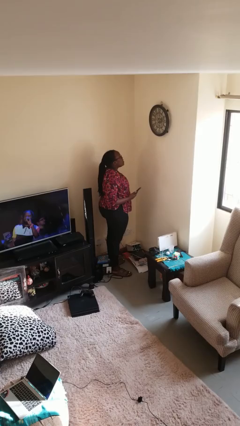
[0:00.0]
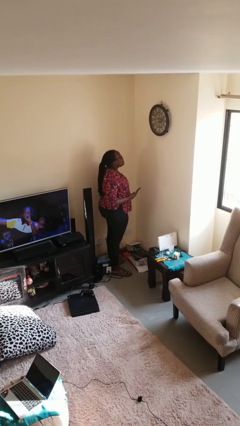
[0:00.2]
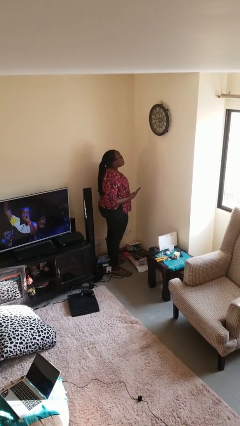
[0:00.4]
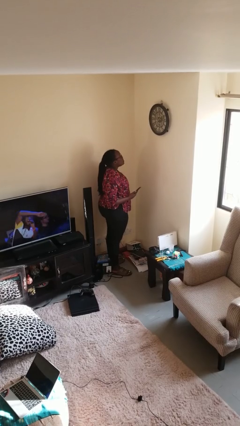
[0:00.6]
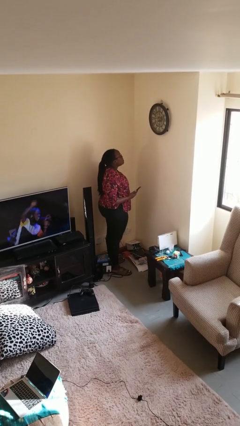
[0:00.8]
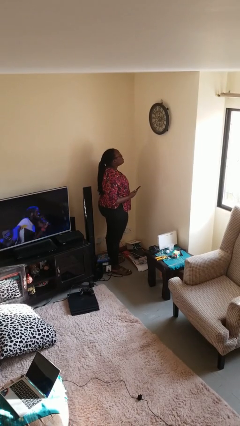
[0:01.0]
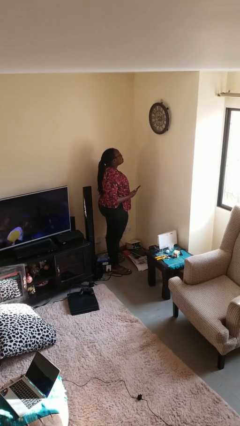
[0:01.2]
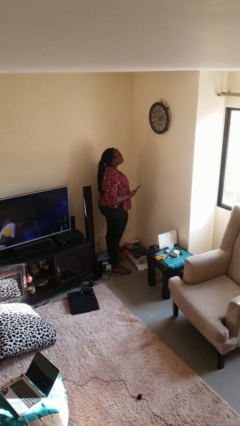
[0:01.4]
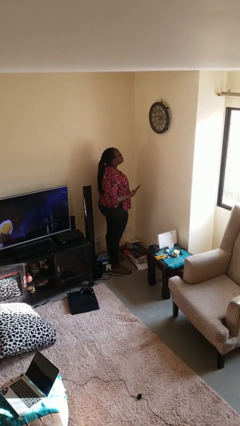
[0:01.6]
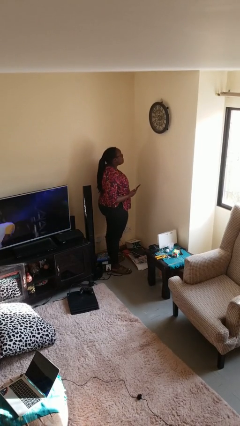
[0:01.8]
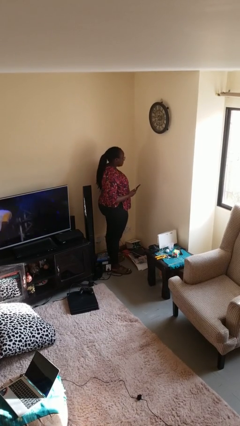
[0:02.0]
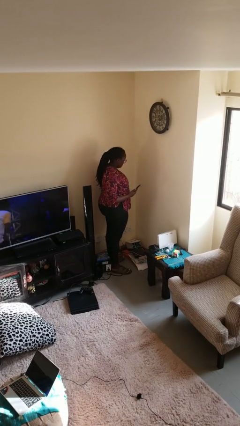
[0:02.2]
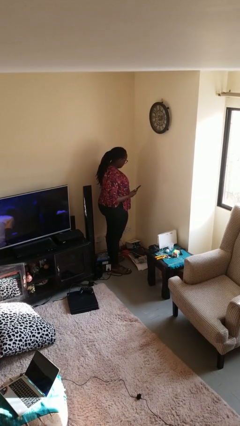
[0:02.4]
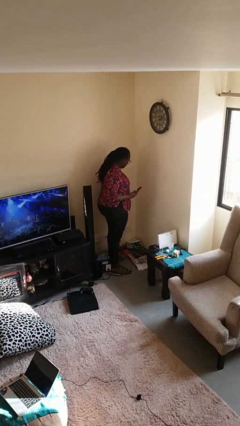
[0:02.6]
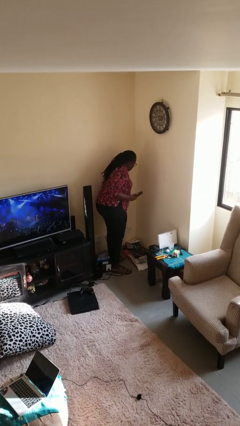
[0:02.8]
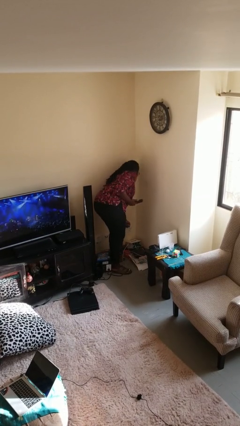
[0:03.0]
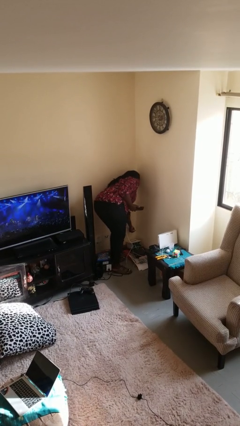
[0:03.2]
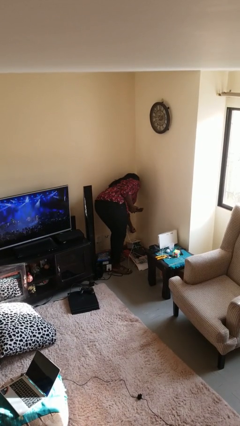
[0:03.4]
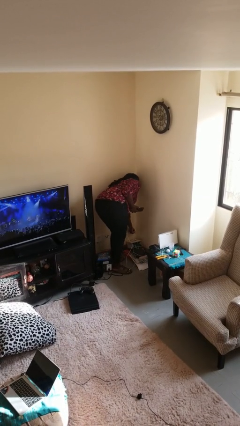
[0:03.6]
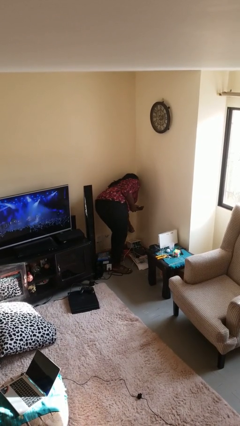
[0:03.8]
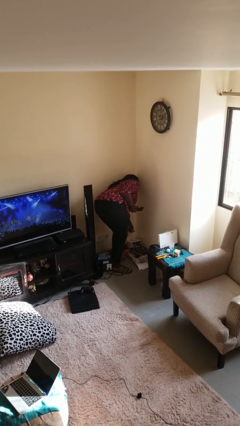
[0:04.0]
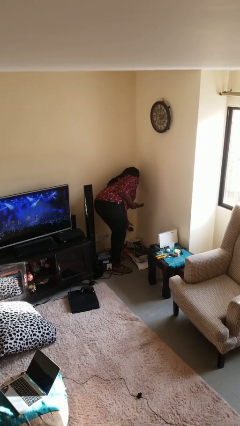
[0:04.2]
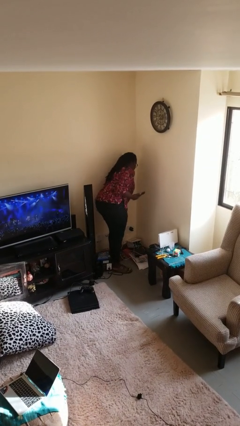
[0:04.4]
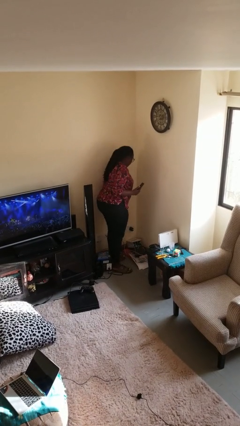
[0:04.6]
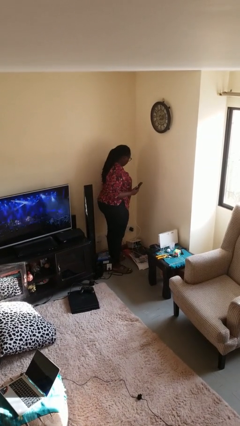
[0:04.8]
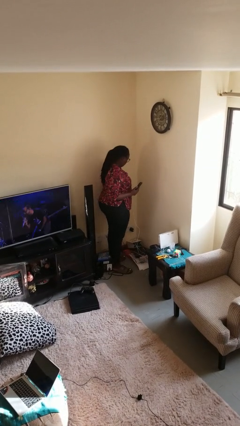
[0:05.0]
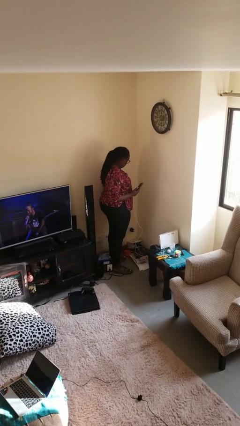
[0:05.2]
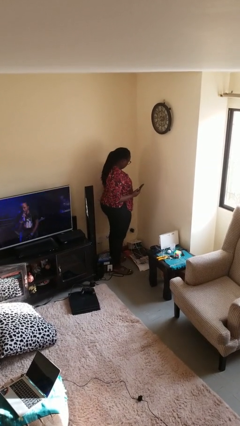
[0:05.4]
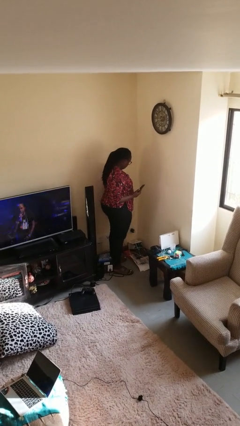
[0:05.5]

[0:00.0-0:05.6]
person plugs into electrical socket

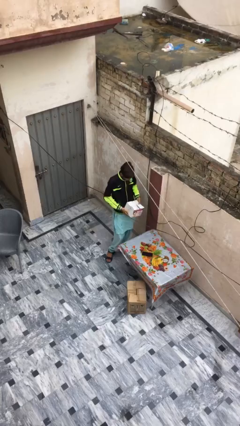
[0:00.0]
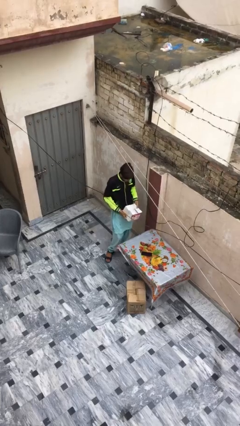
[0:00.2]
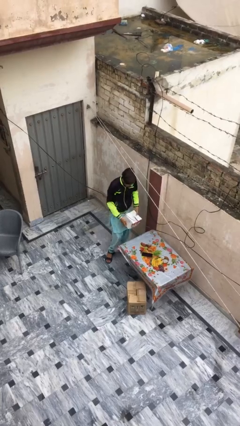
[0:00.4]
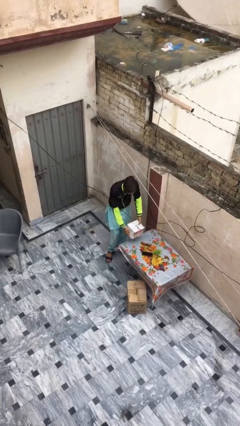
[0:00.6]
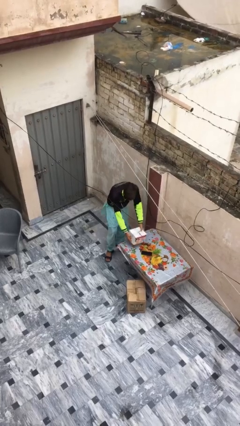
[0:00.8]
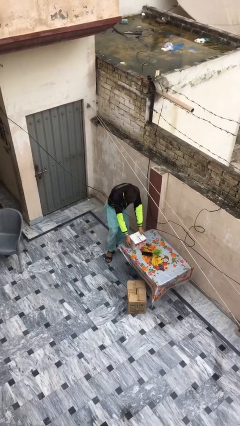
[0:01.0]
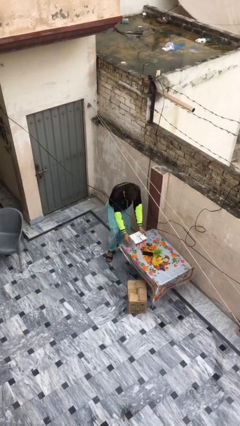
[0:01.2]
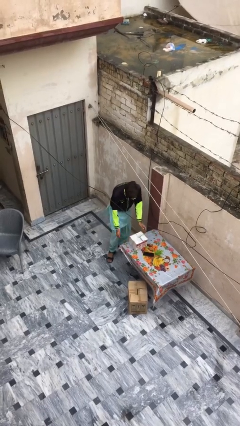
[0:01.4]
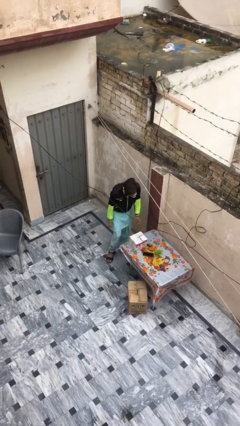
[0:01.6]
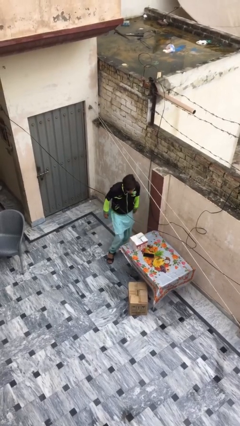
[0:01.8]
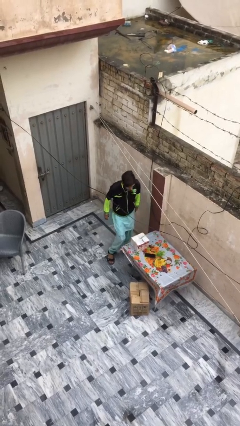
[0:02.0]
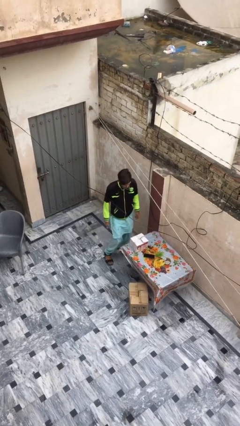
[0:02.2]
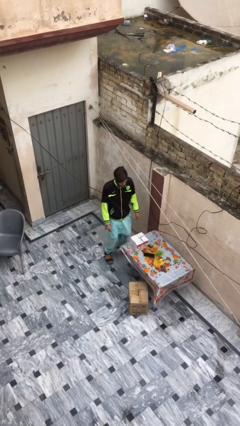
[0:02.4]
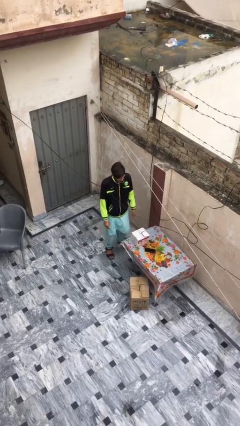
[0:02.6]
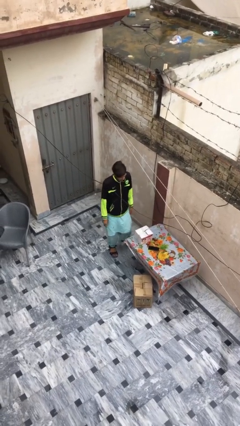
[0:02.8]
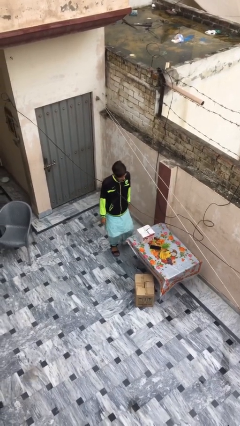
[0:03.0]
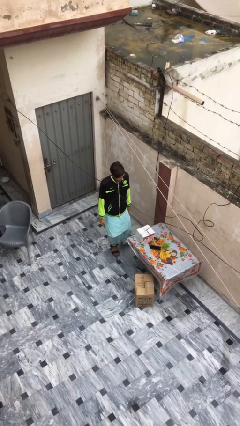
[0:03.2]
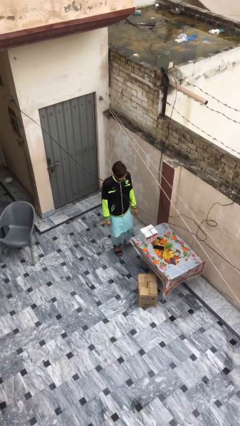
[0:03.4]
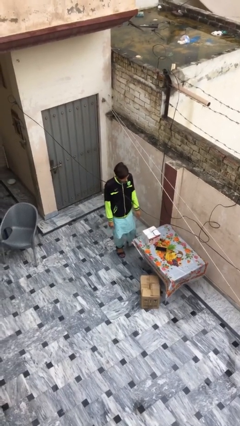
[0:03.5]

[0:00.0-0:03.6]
person puts down object on table

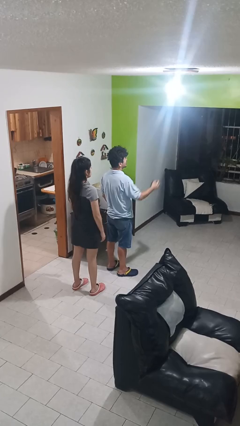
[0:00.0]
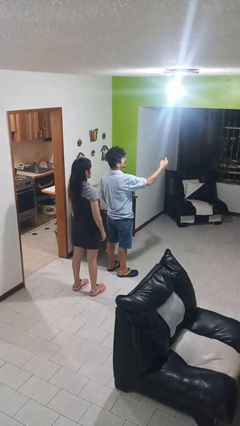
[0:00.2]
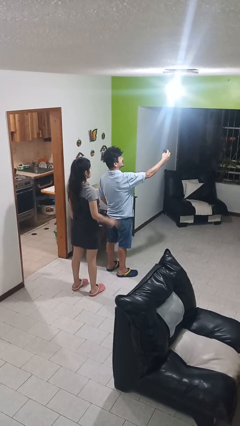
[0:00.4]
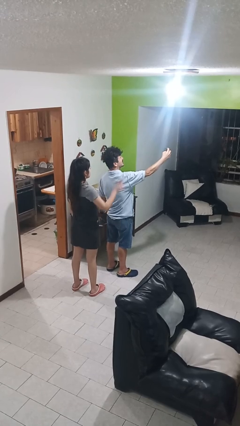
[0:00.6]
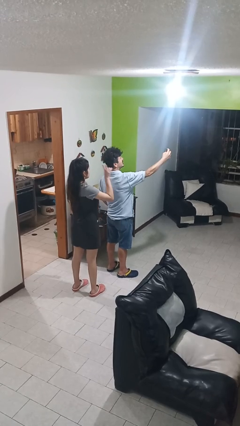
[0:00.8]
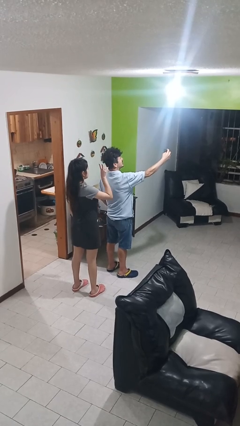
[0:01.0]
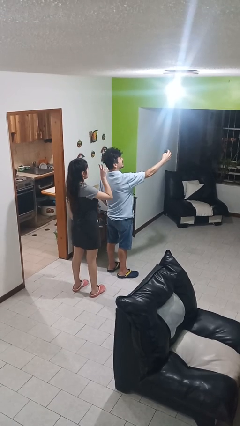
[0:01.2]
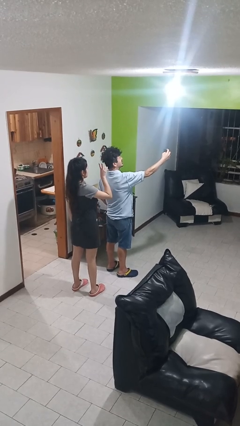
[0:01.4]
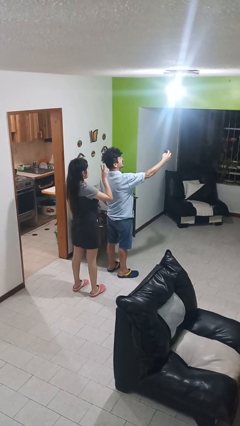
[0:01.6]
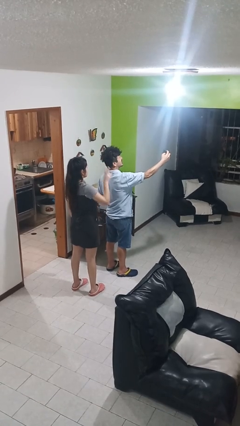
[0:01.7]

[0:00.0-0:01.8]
person takes selfie with person

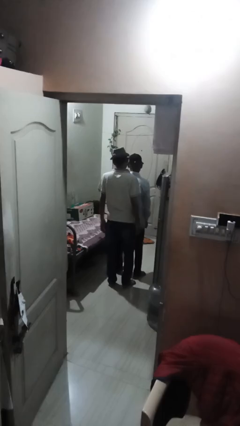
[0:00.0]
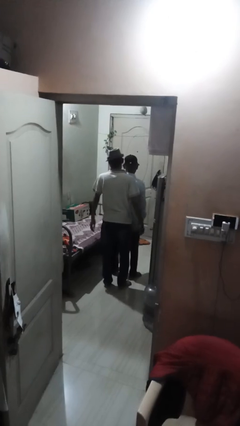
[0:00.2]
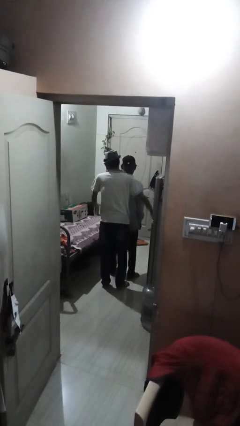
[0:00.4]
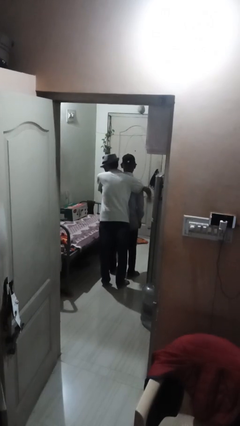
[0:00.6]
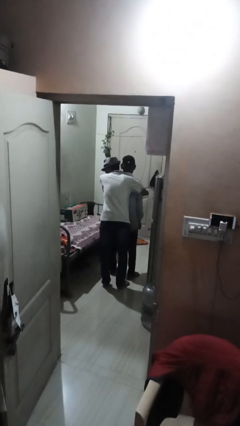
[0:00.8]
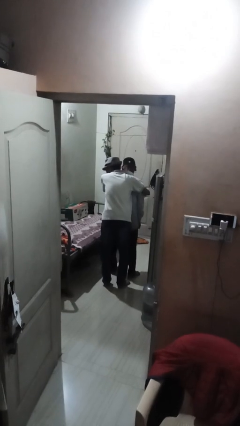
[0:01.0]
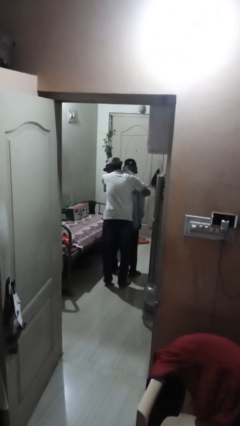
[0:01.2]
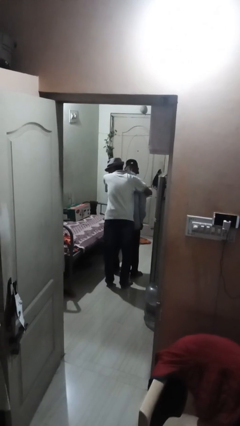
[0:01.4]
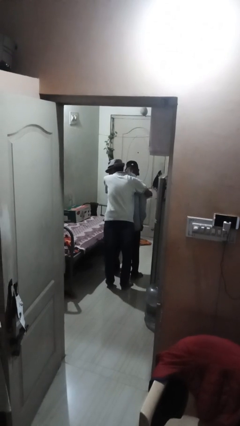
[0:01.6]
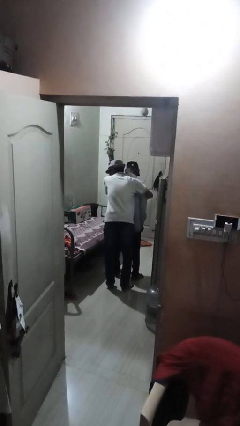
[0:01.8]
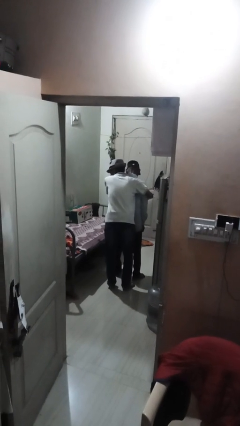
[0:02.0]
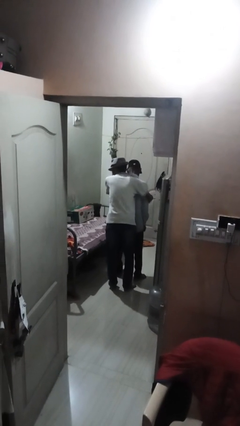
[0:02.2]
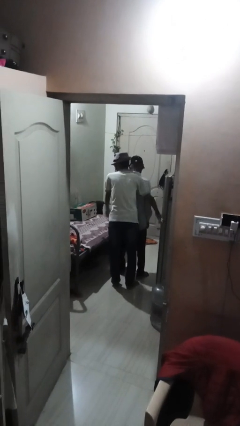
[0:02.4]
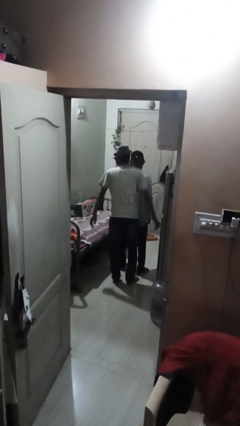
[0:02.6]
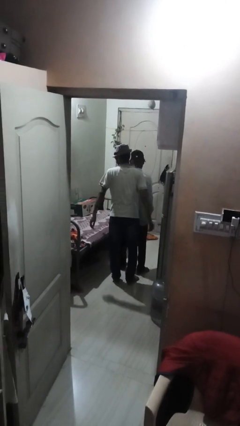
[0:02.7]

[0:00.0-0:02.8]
person hugs person from behind

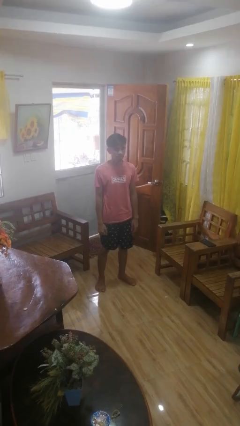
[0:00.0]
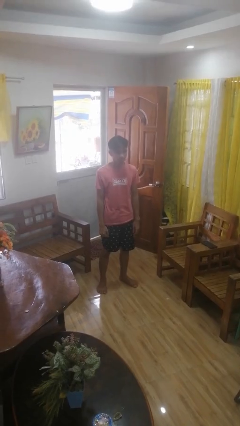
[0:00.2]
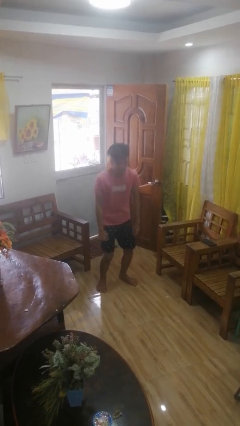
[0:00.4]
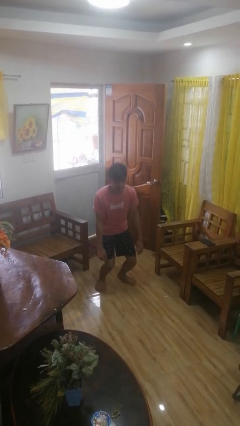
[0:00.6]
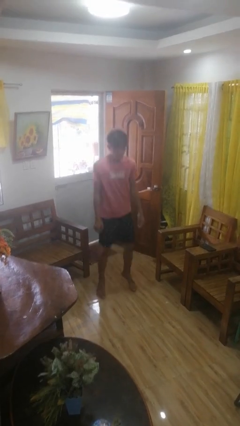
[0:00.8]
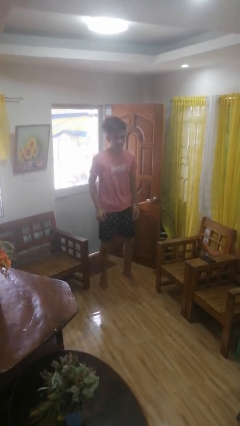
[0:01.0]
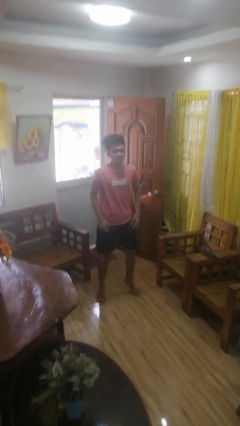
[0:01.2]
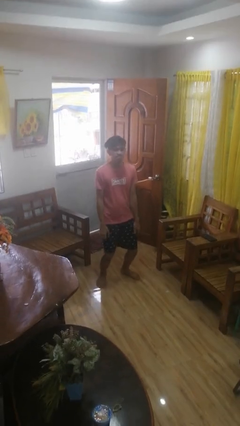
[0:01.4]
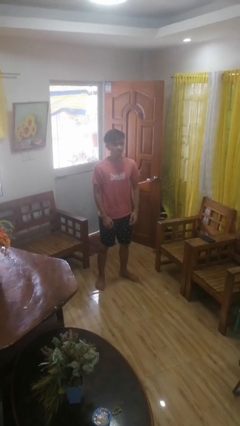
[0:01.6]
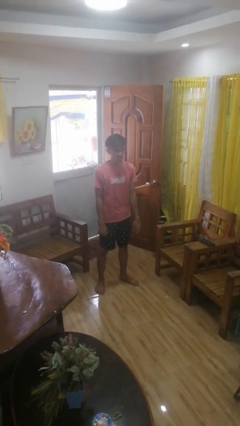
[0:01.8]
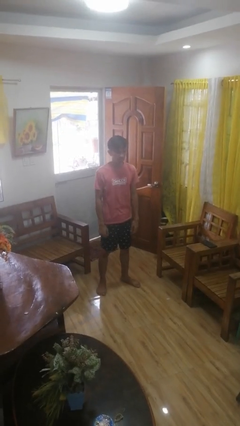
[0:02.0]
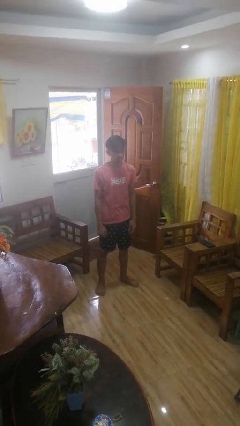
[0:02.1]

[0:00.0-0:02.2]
person jumps

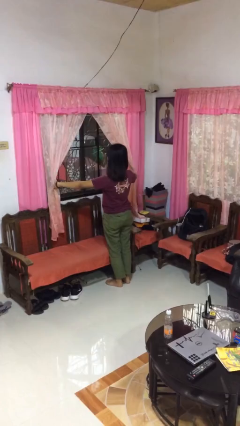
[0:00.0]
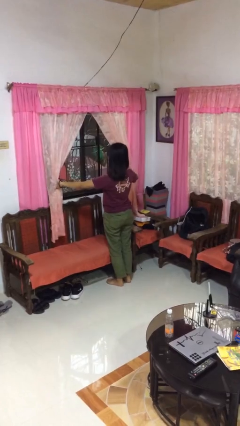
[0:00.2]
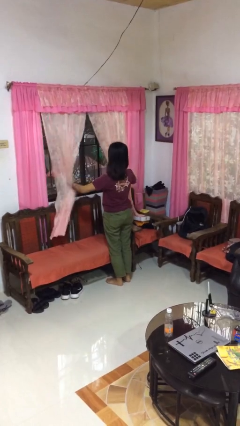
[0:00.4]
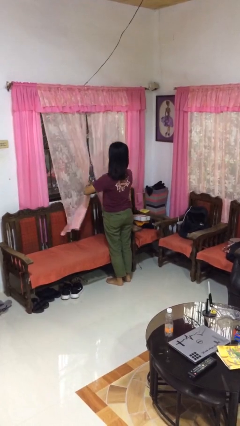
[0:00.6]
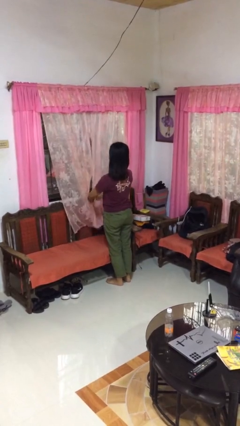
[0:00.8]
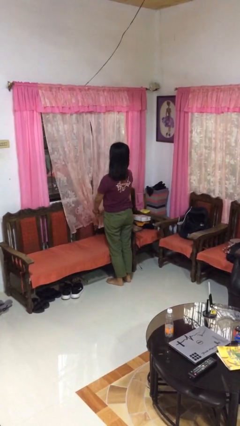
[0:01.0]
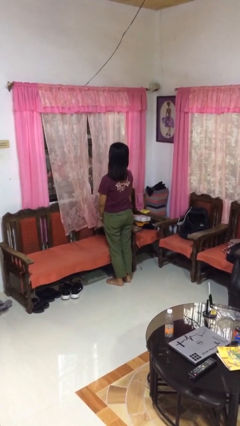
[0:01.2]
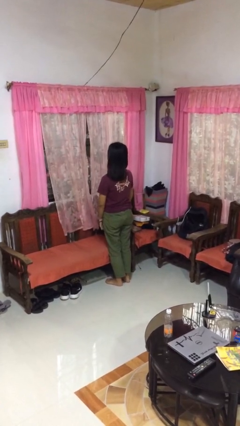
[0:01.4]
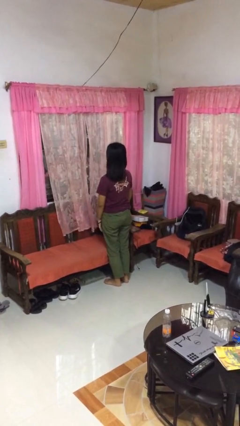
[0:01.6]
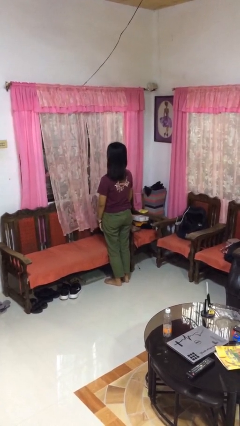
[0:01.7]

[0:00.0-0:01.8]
person closes curtains
